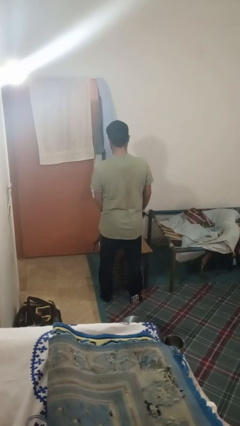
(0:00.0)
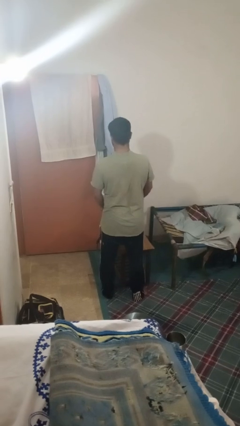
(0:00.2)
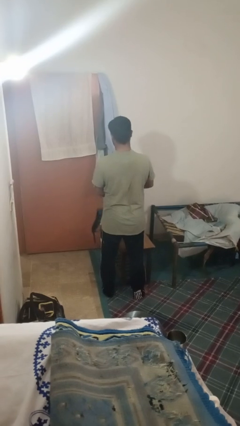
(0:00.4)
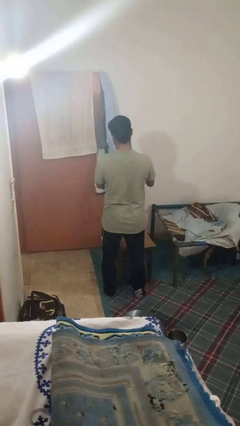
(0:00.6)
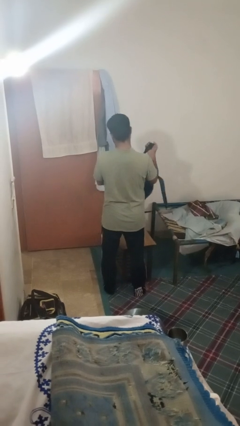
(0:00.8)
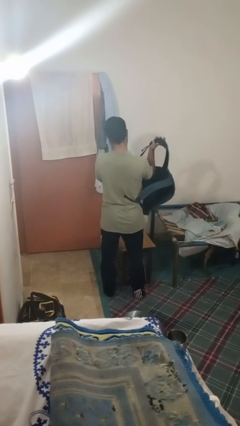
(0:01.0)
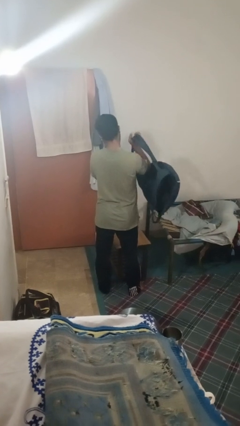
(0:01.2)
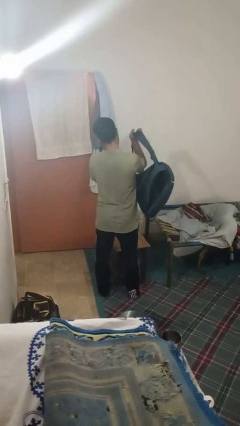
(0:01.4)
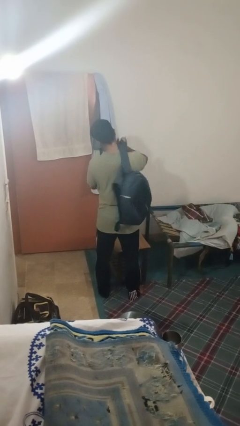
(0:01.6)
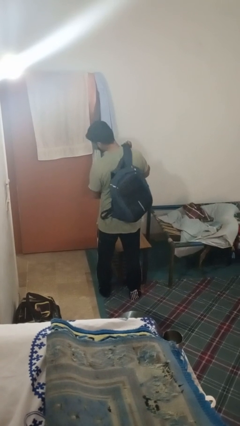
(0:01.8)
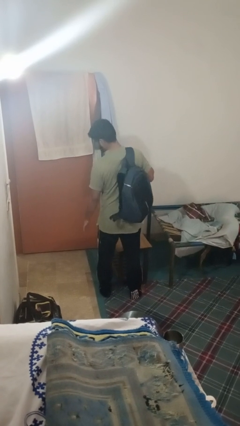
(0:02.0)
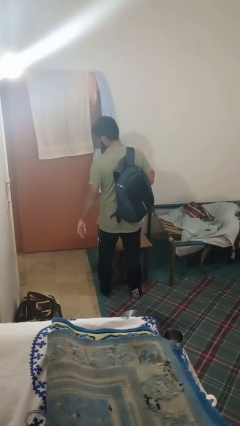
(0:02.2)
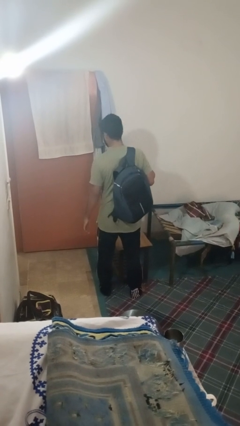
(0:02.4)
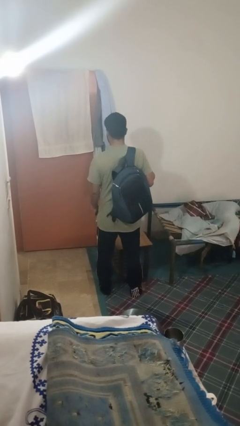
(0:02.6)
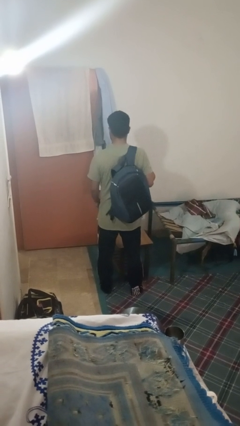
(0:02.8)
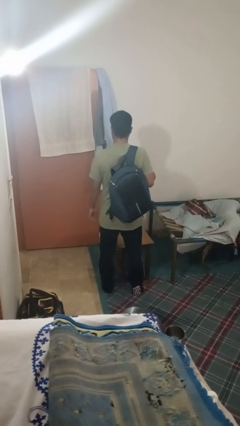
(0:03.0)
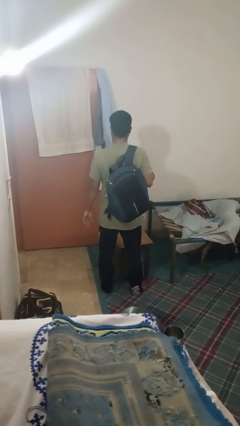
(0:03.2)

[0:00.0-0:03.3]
person puts on backpack

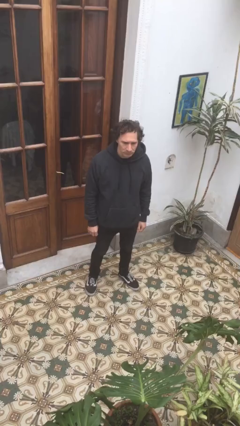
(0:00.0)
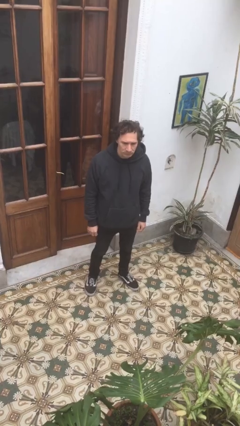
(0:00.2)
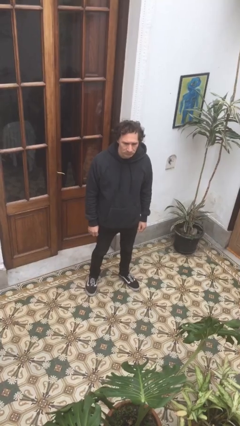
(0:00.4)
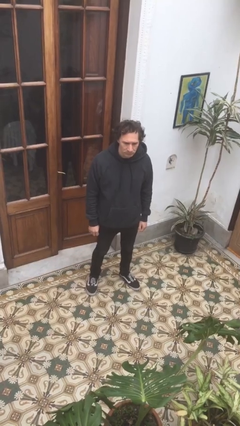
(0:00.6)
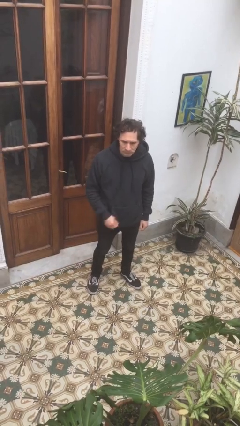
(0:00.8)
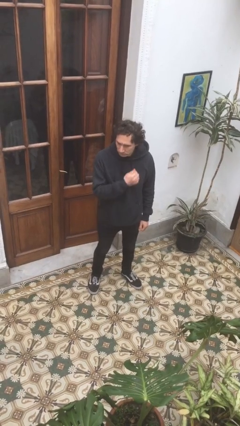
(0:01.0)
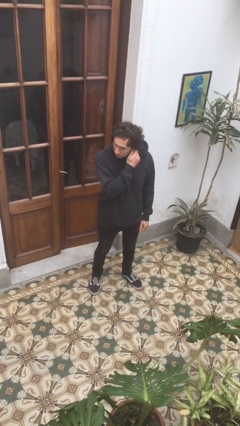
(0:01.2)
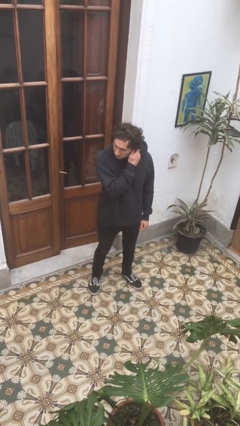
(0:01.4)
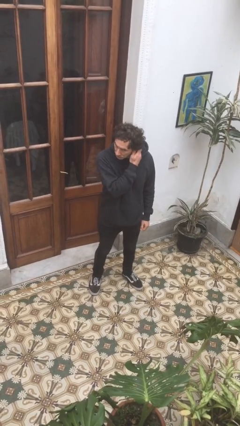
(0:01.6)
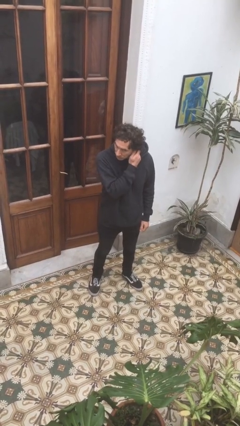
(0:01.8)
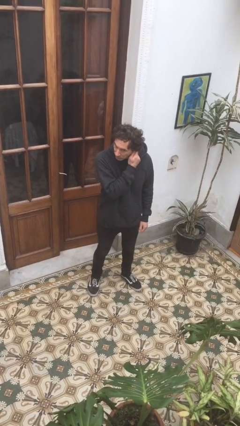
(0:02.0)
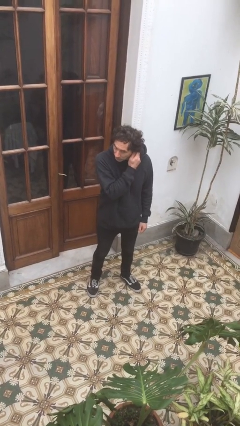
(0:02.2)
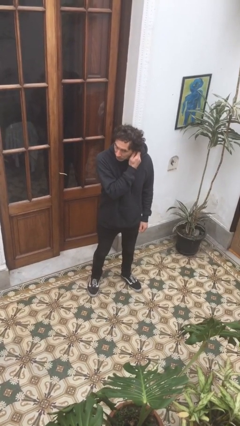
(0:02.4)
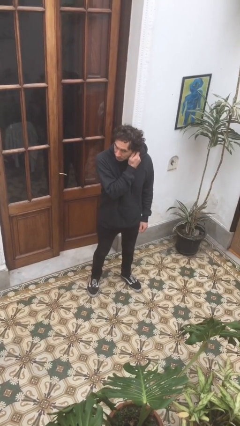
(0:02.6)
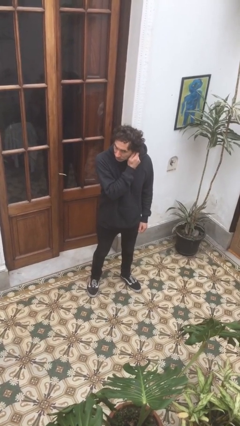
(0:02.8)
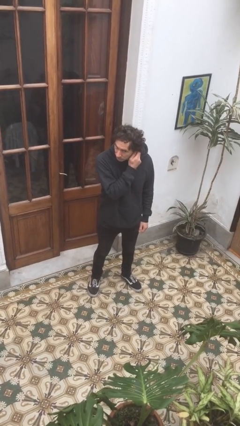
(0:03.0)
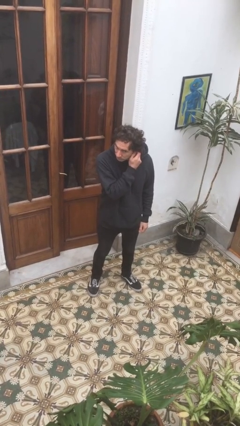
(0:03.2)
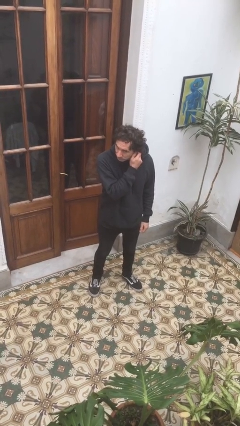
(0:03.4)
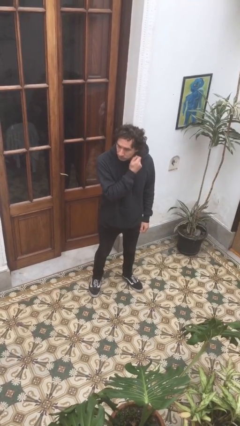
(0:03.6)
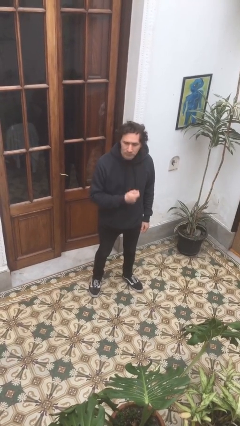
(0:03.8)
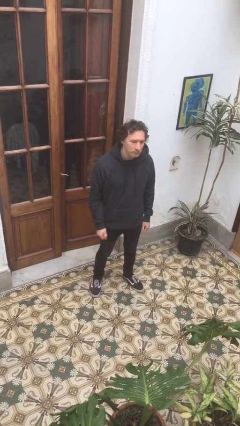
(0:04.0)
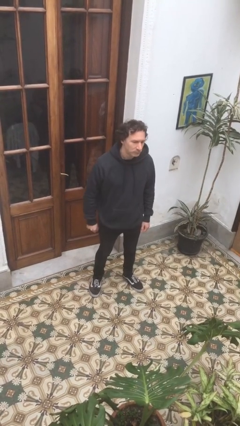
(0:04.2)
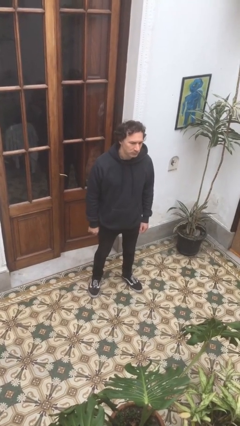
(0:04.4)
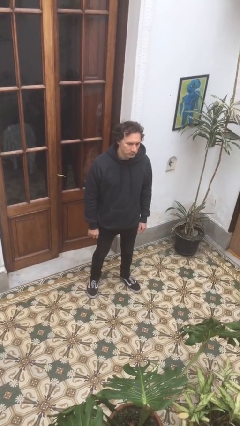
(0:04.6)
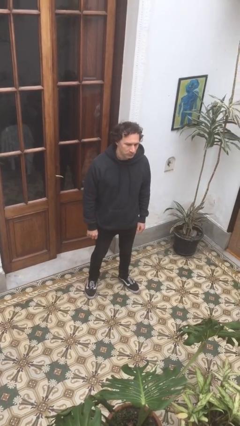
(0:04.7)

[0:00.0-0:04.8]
person touches earlobe

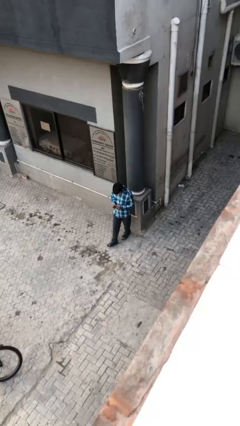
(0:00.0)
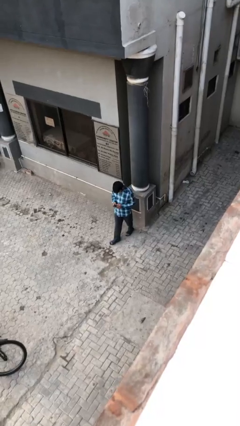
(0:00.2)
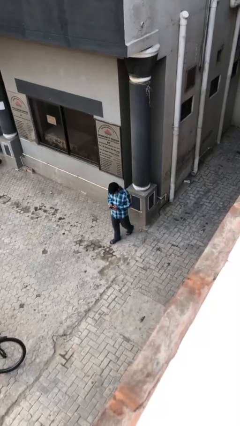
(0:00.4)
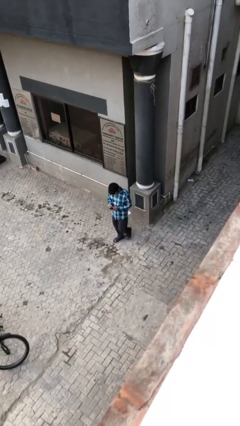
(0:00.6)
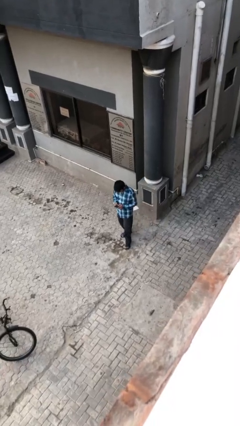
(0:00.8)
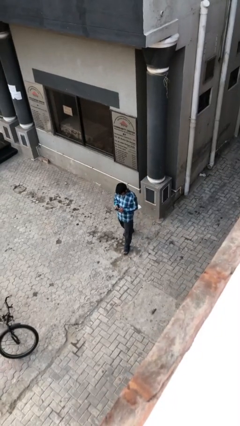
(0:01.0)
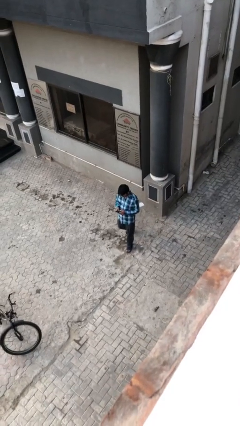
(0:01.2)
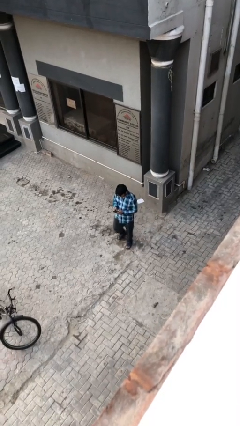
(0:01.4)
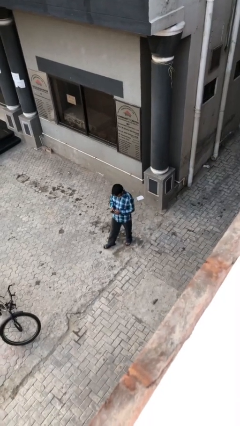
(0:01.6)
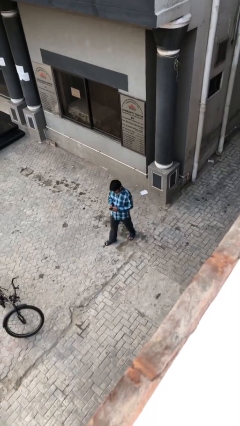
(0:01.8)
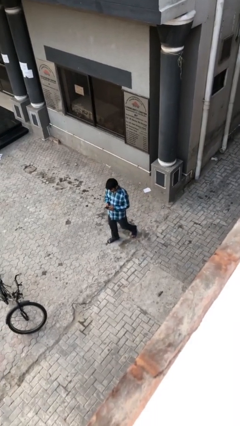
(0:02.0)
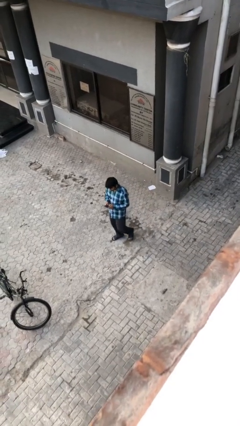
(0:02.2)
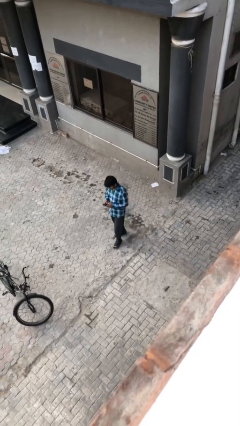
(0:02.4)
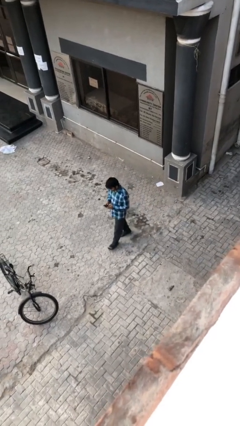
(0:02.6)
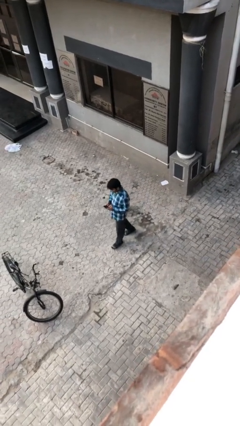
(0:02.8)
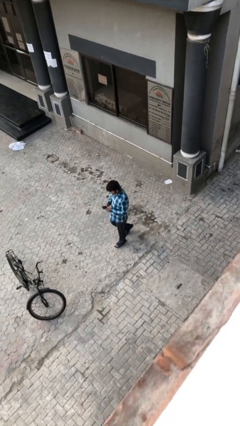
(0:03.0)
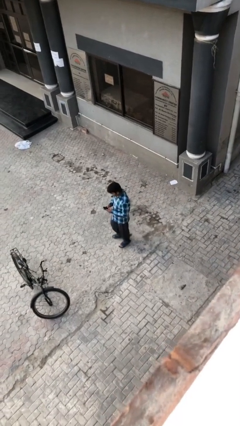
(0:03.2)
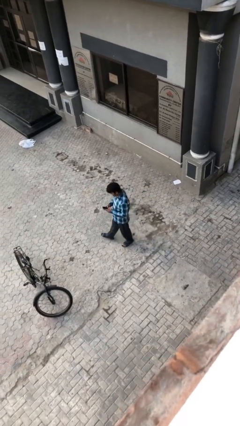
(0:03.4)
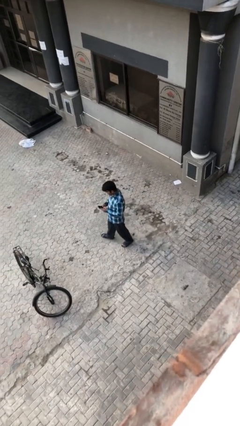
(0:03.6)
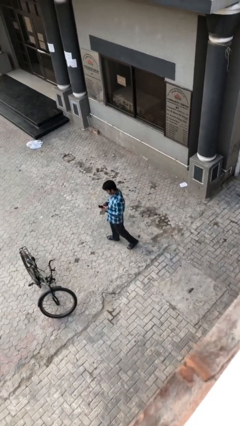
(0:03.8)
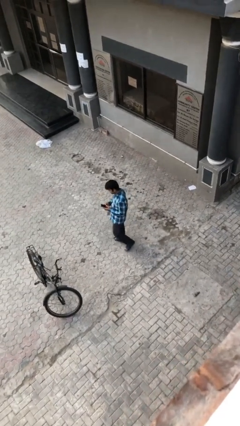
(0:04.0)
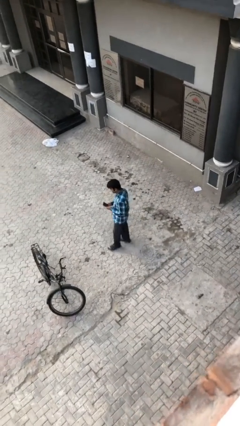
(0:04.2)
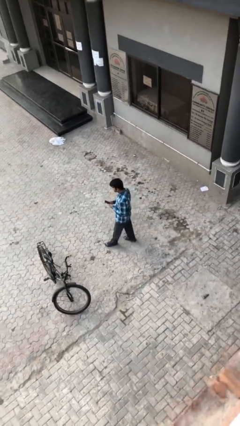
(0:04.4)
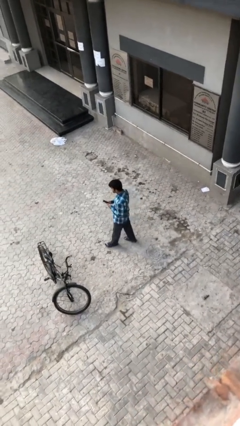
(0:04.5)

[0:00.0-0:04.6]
person texts on phone

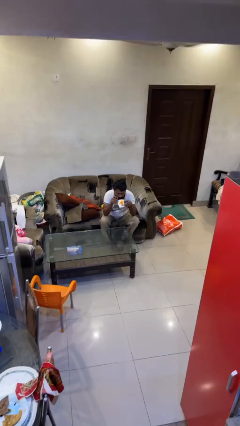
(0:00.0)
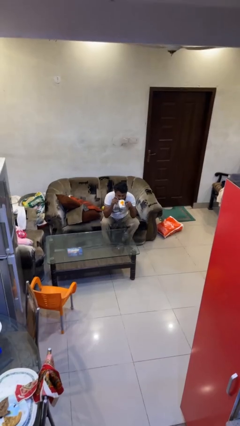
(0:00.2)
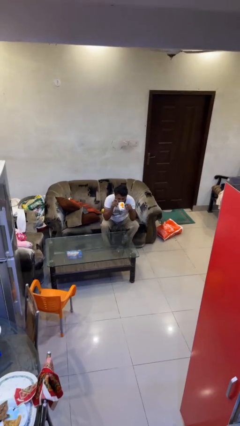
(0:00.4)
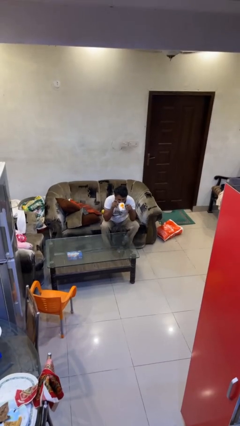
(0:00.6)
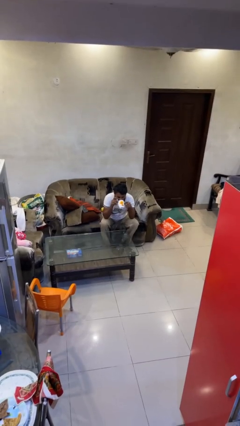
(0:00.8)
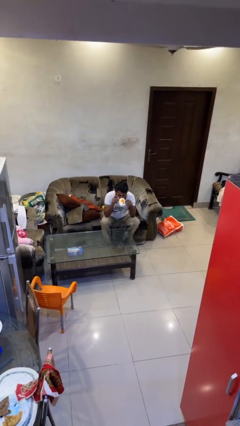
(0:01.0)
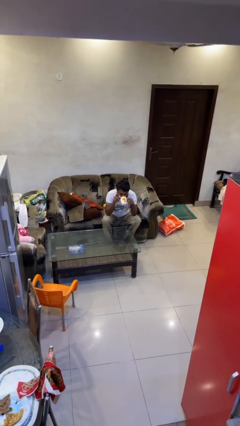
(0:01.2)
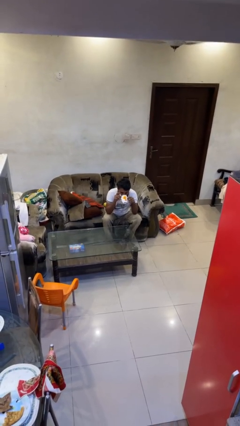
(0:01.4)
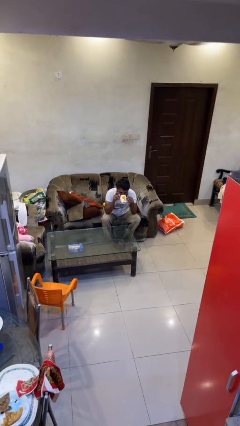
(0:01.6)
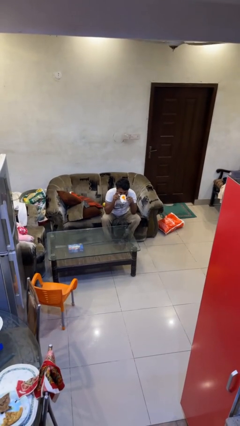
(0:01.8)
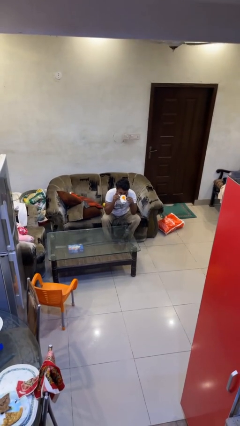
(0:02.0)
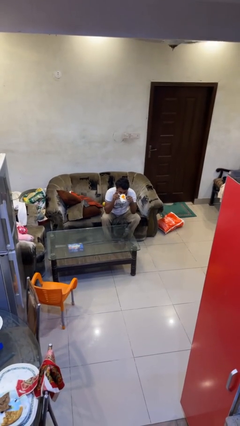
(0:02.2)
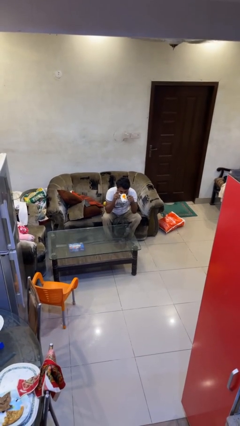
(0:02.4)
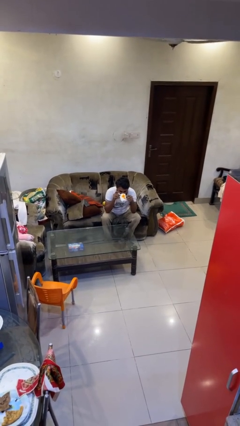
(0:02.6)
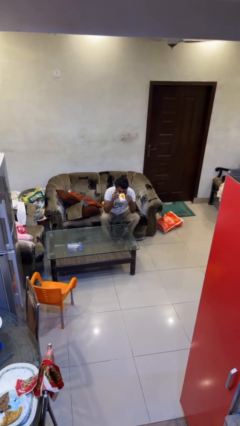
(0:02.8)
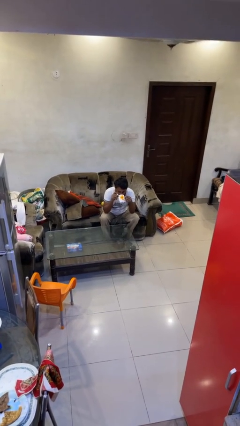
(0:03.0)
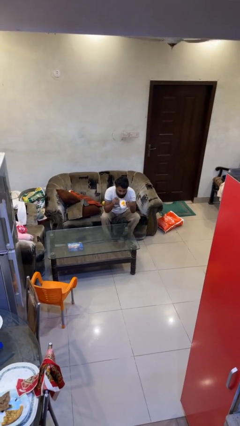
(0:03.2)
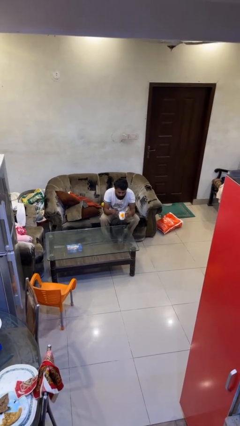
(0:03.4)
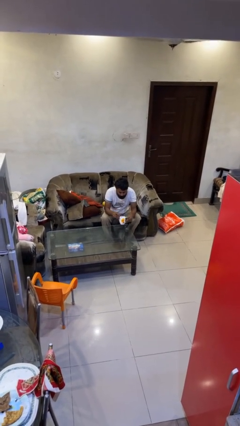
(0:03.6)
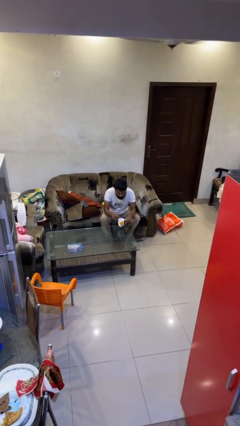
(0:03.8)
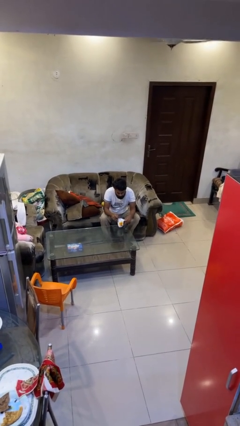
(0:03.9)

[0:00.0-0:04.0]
person drinks from mug

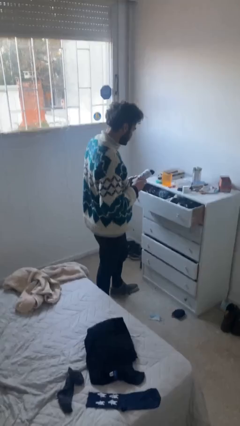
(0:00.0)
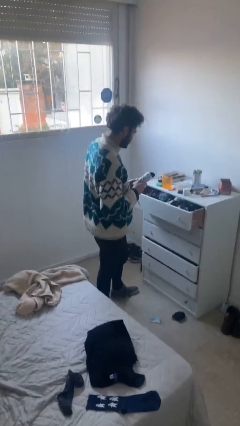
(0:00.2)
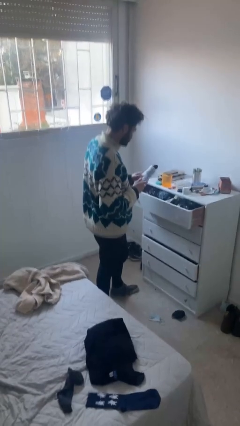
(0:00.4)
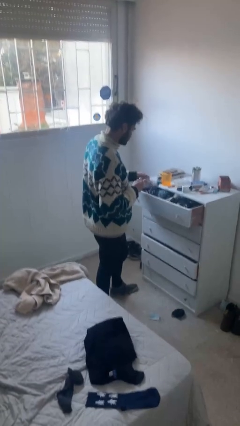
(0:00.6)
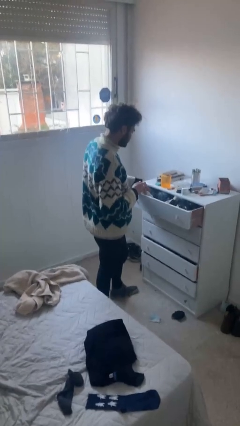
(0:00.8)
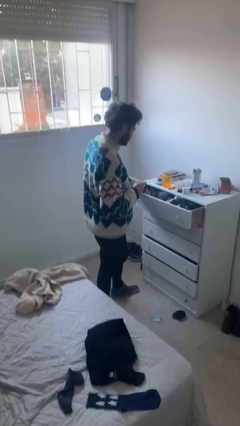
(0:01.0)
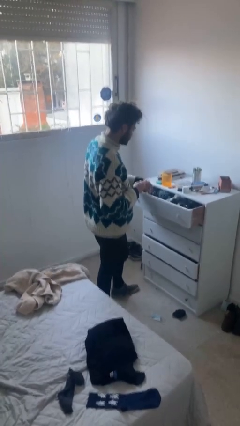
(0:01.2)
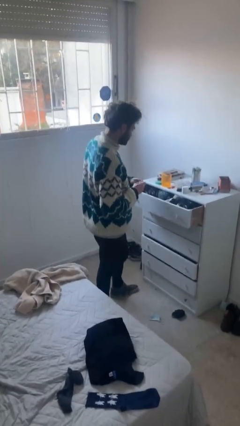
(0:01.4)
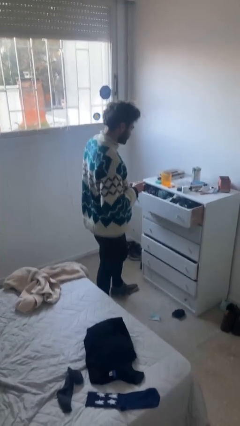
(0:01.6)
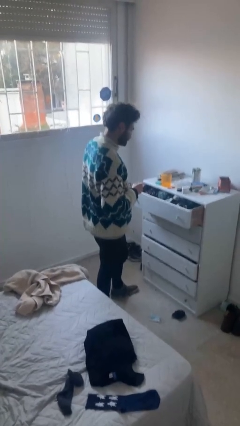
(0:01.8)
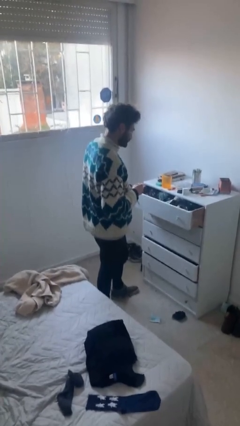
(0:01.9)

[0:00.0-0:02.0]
person puts clothes into dresser
